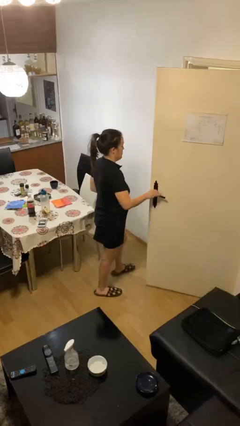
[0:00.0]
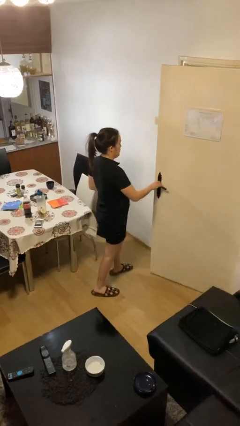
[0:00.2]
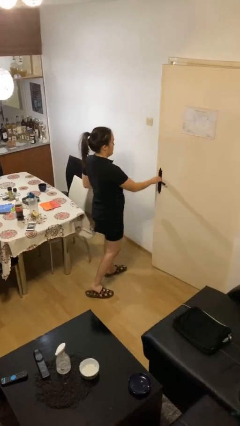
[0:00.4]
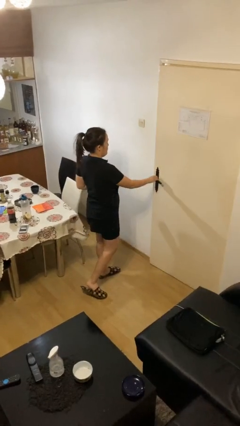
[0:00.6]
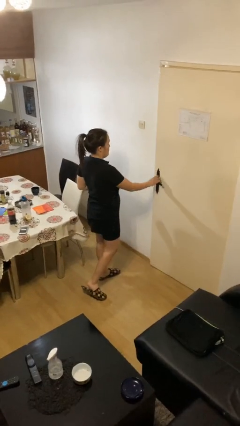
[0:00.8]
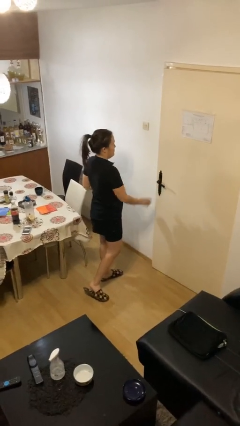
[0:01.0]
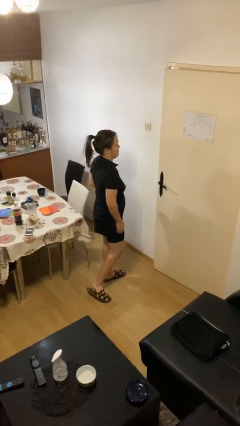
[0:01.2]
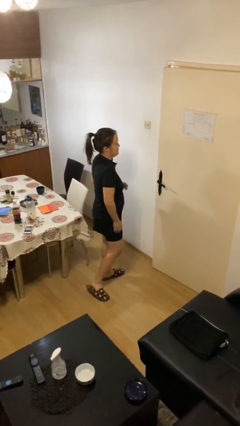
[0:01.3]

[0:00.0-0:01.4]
person closes facility door

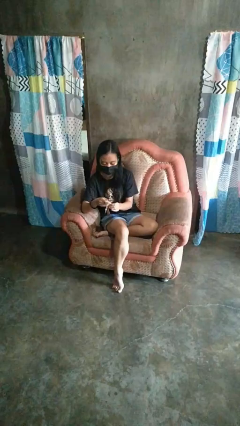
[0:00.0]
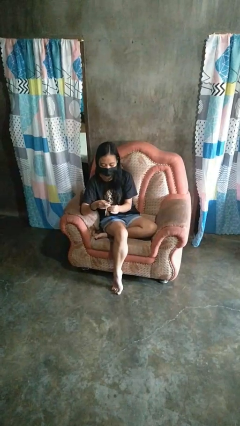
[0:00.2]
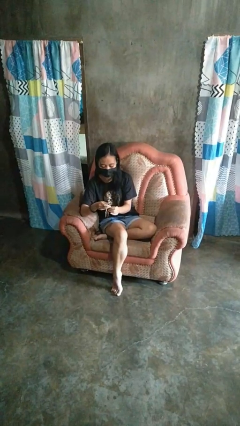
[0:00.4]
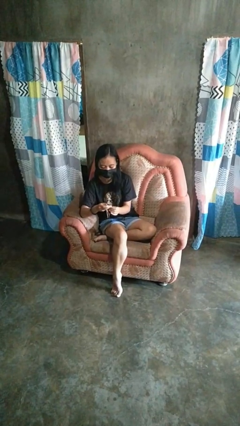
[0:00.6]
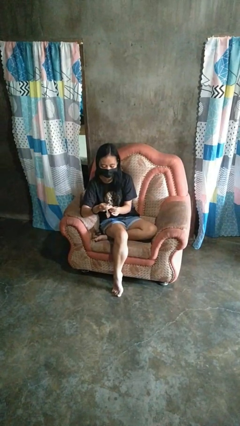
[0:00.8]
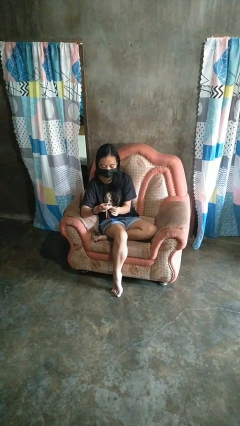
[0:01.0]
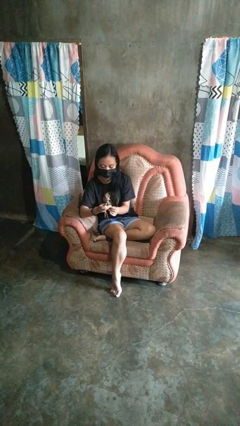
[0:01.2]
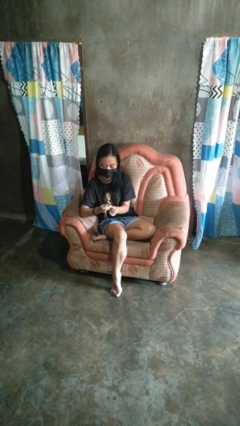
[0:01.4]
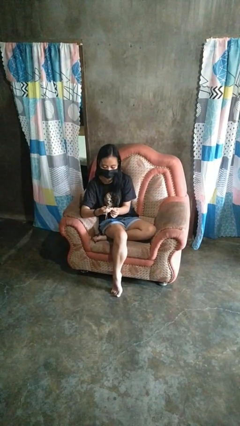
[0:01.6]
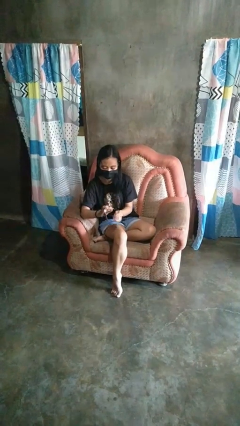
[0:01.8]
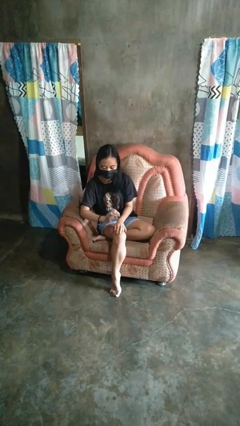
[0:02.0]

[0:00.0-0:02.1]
person clips fingernails

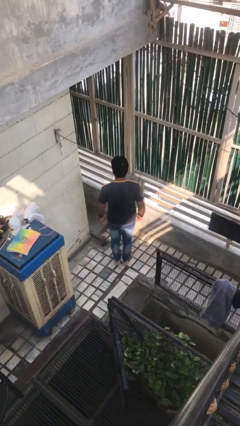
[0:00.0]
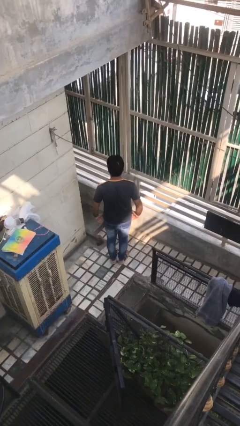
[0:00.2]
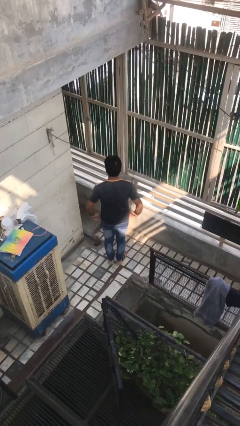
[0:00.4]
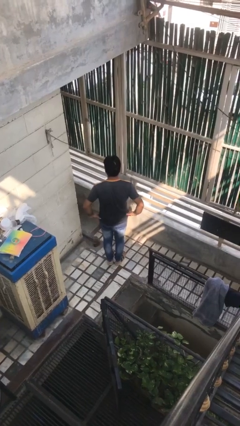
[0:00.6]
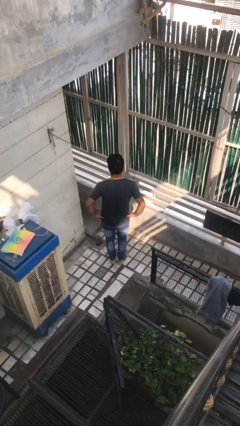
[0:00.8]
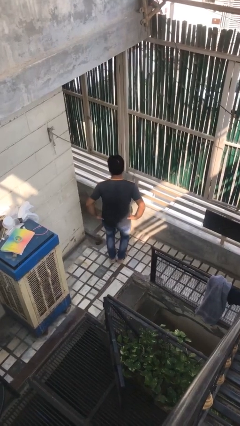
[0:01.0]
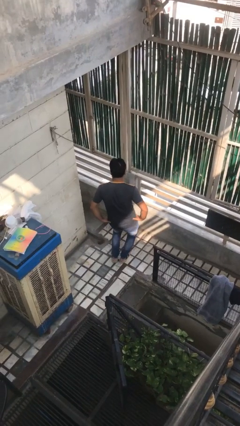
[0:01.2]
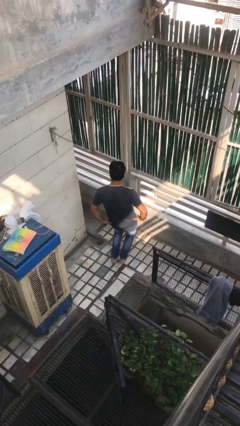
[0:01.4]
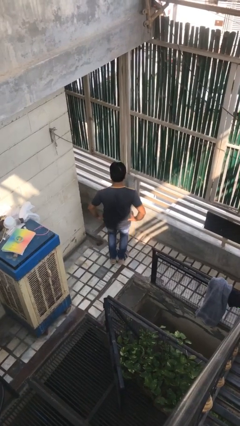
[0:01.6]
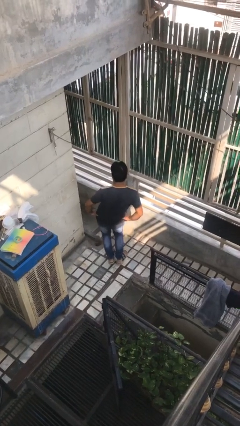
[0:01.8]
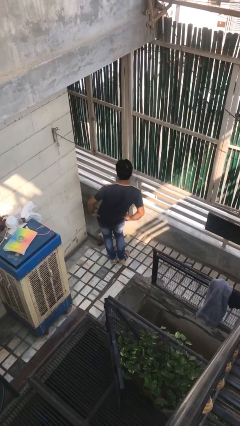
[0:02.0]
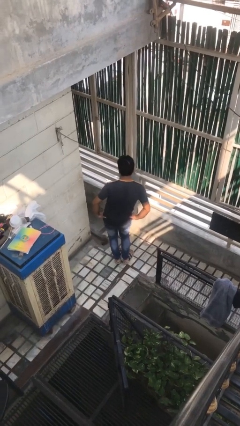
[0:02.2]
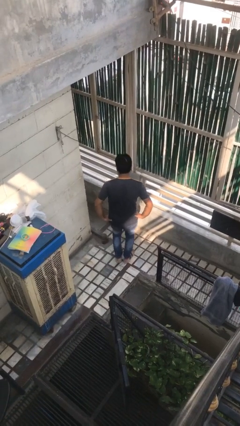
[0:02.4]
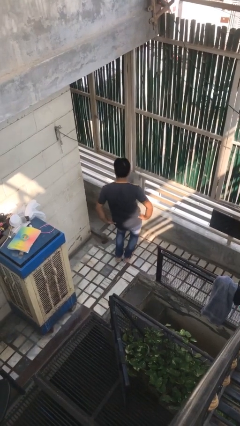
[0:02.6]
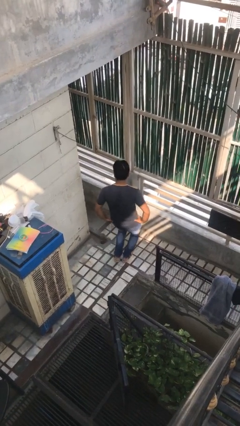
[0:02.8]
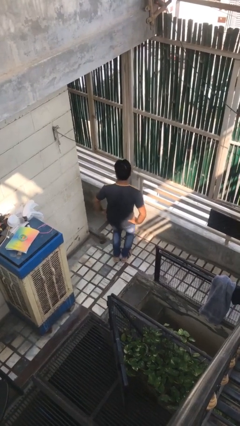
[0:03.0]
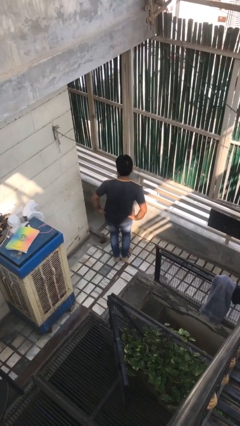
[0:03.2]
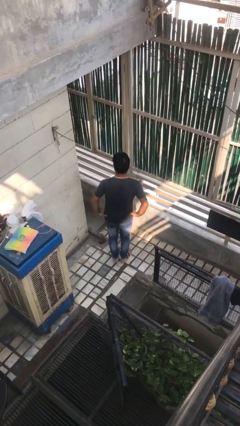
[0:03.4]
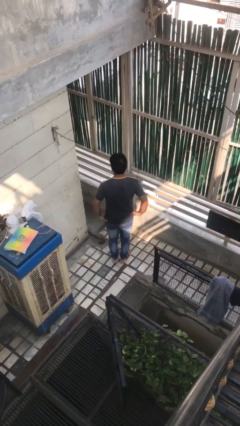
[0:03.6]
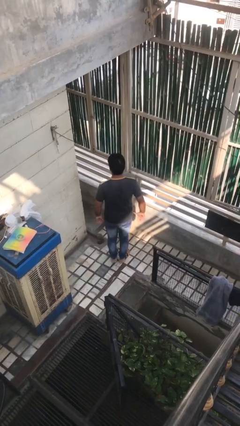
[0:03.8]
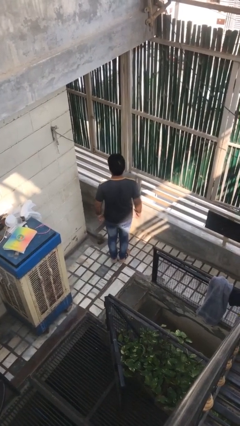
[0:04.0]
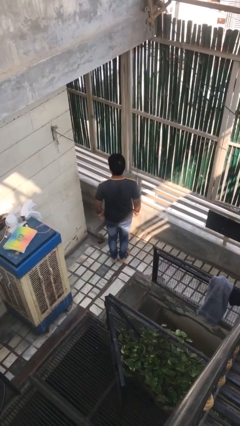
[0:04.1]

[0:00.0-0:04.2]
person wiggles hips

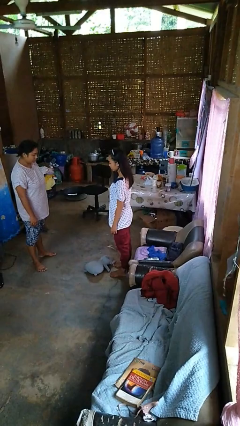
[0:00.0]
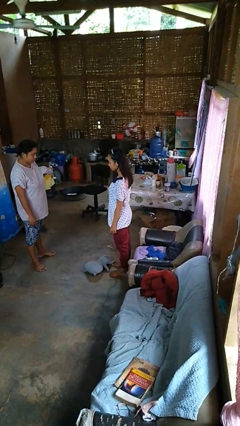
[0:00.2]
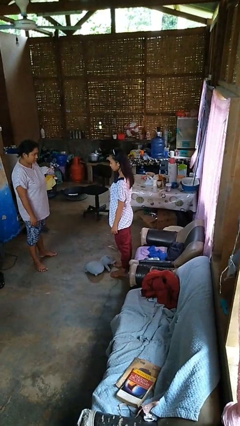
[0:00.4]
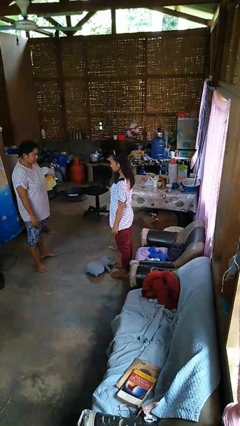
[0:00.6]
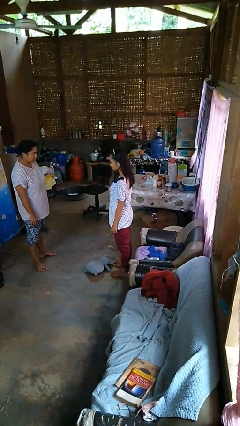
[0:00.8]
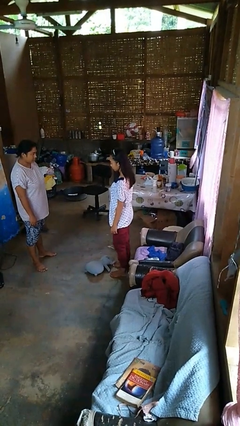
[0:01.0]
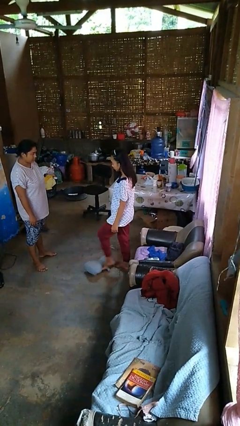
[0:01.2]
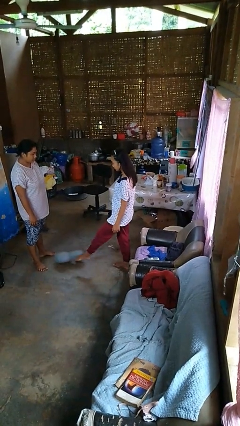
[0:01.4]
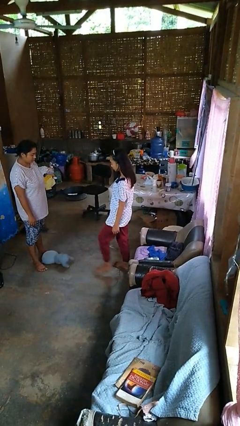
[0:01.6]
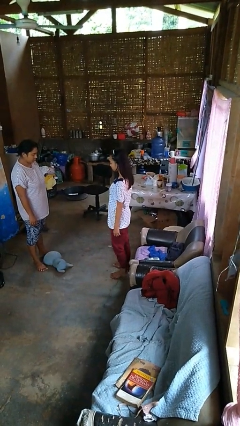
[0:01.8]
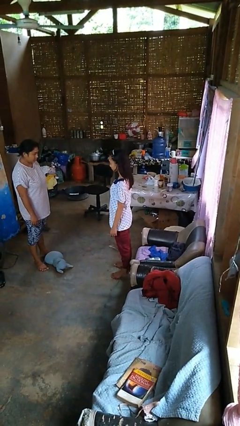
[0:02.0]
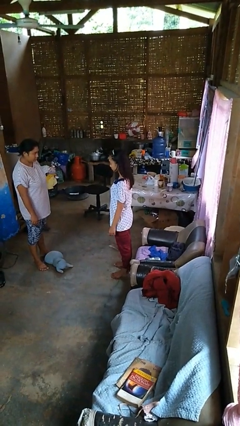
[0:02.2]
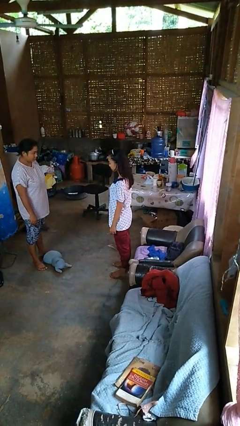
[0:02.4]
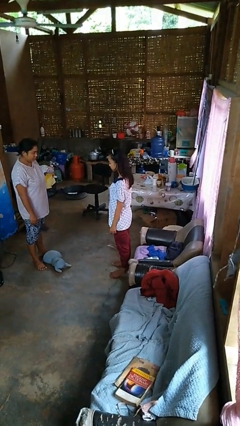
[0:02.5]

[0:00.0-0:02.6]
person kicks object to person

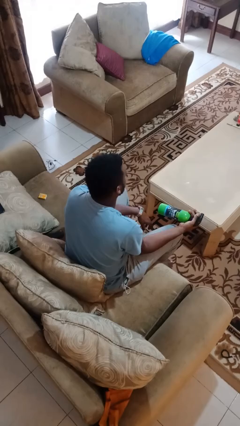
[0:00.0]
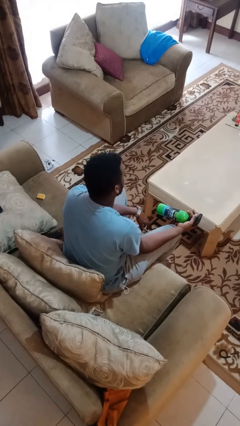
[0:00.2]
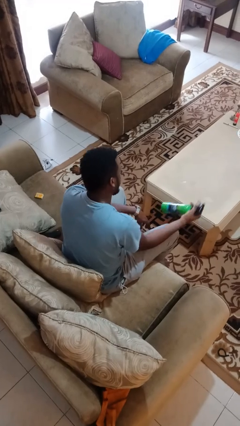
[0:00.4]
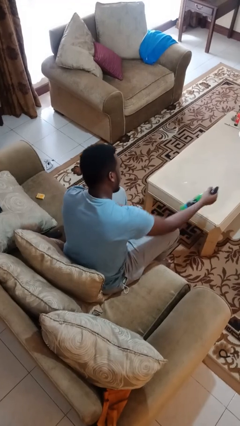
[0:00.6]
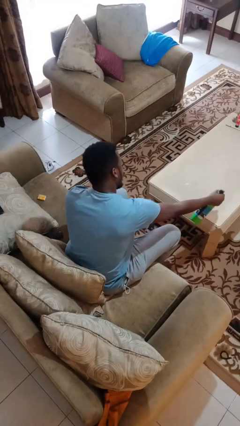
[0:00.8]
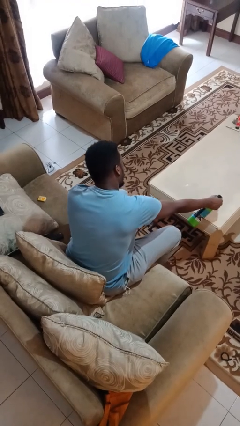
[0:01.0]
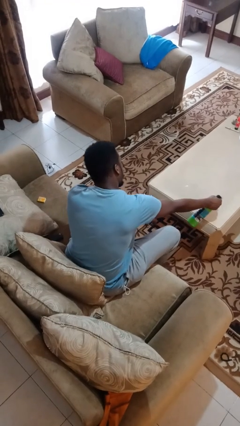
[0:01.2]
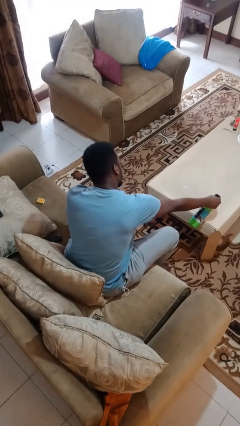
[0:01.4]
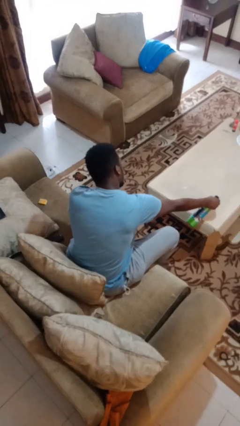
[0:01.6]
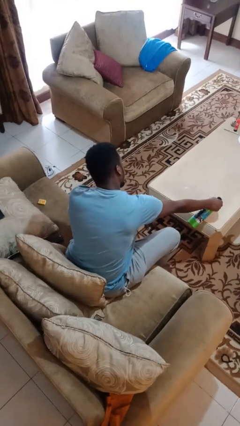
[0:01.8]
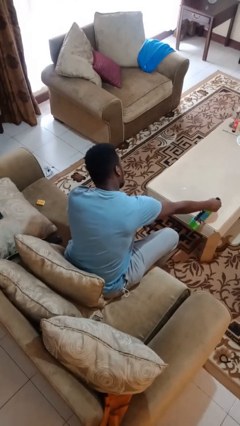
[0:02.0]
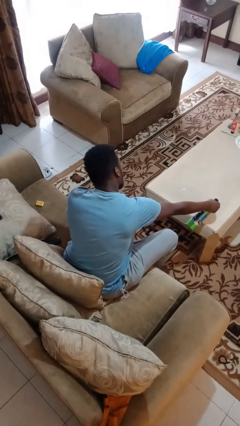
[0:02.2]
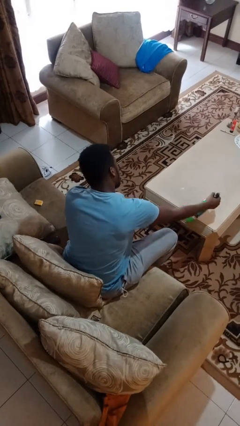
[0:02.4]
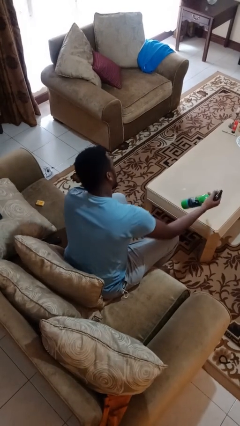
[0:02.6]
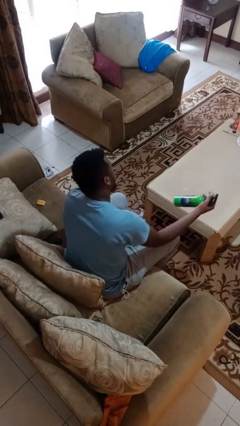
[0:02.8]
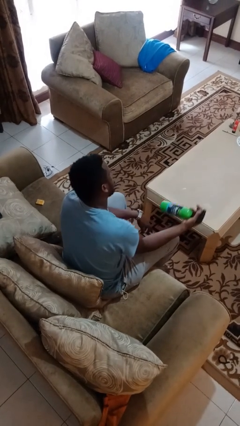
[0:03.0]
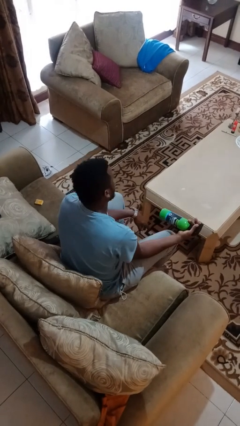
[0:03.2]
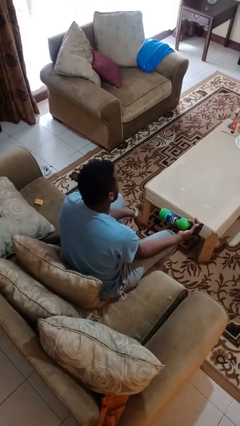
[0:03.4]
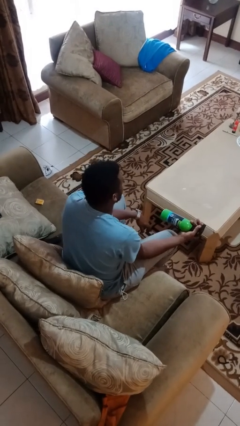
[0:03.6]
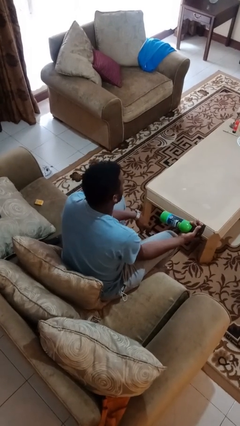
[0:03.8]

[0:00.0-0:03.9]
person sprays from bottle

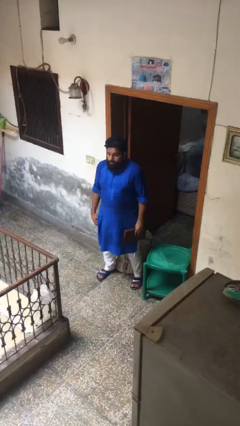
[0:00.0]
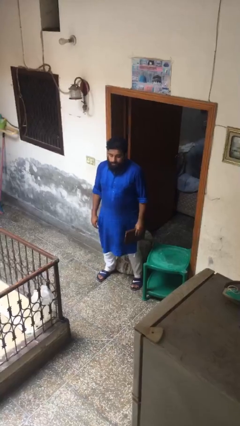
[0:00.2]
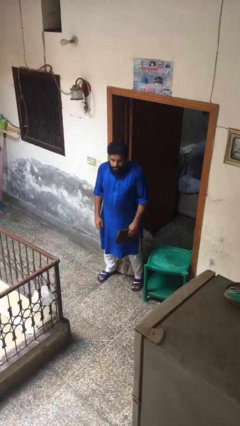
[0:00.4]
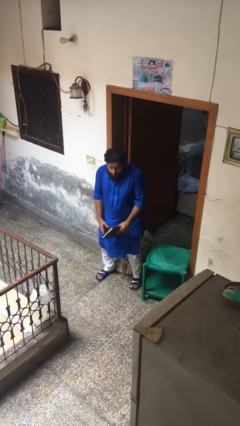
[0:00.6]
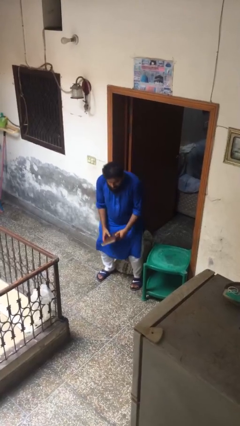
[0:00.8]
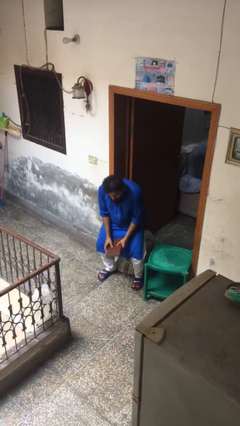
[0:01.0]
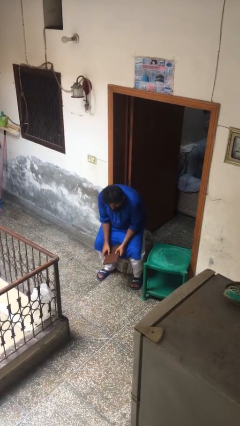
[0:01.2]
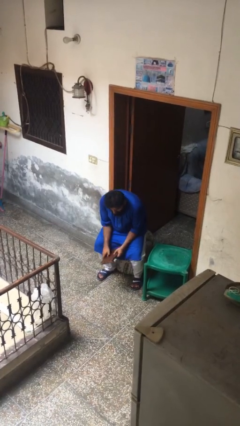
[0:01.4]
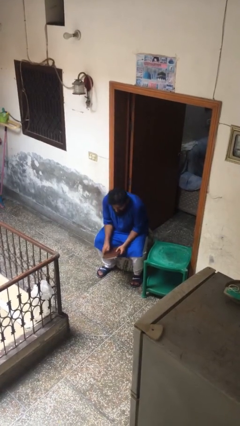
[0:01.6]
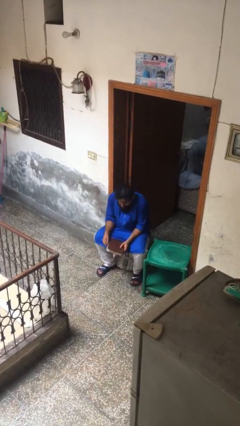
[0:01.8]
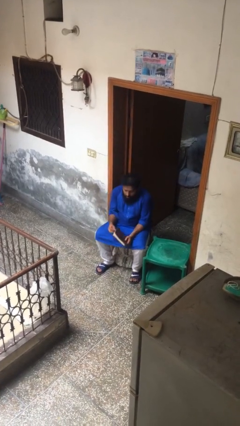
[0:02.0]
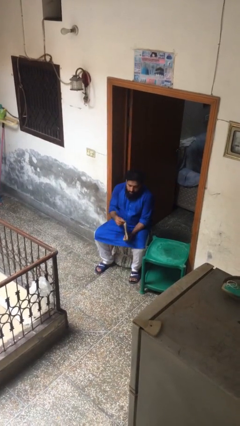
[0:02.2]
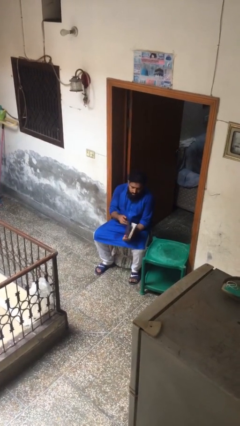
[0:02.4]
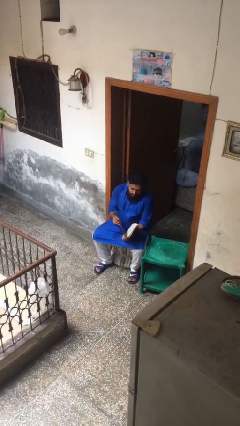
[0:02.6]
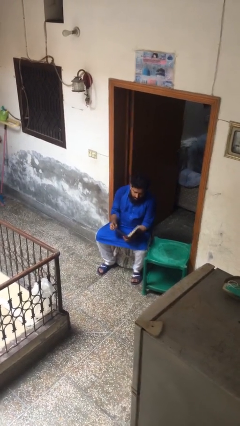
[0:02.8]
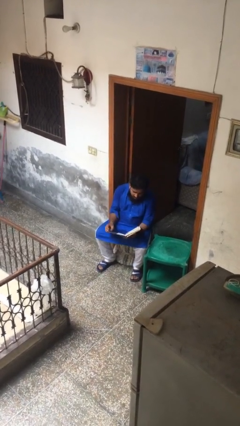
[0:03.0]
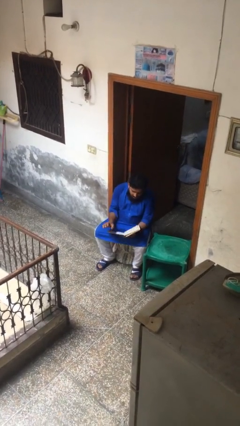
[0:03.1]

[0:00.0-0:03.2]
person sits down
